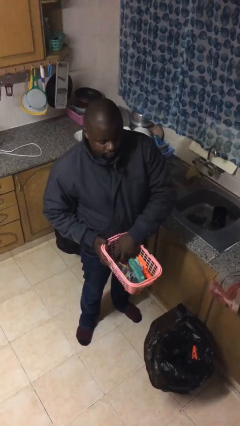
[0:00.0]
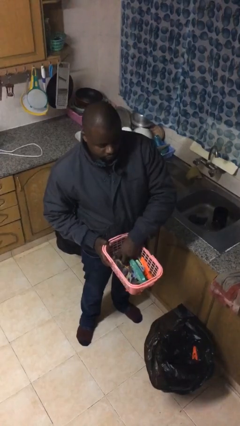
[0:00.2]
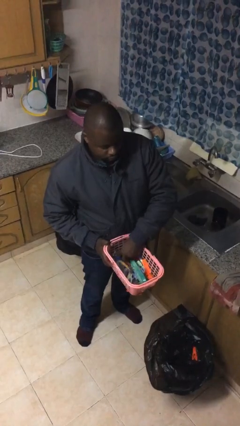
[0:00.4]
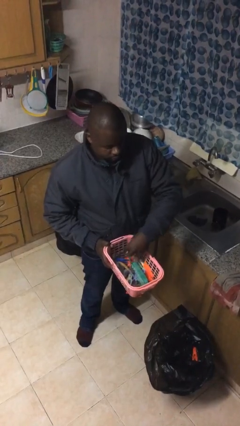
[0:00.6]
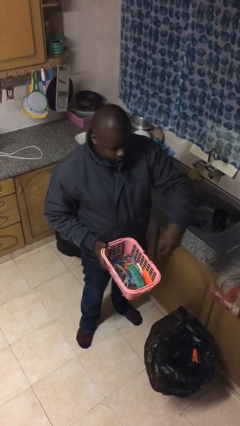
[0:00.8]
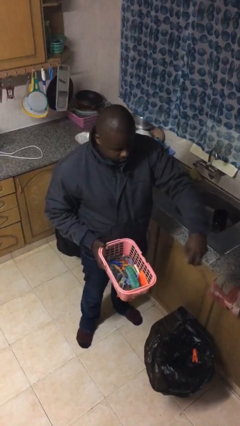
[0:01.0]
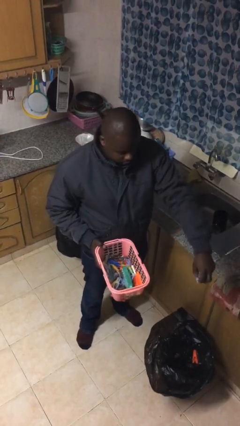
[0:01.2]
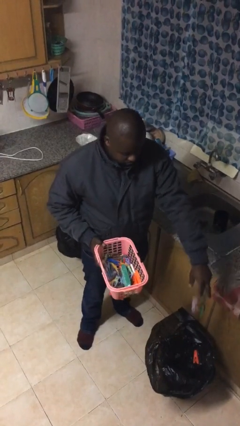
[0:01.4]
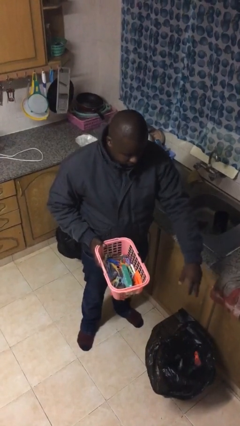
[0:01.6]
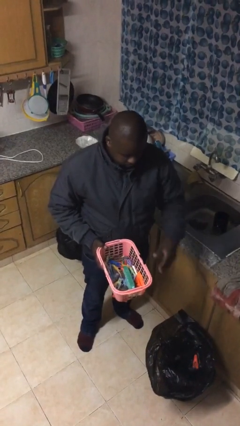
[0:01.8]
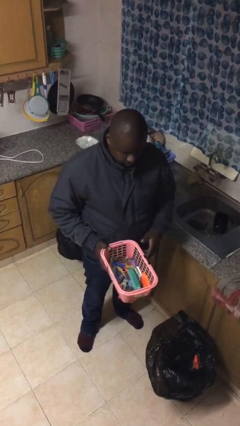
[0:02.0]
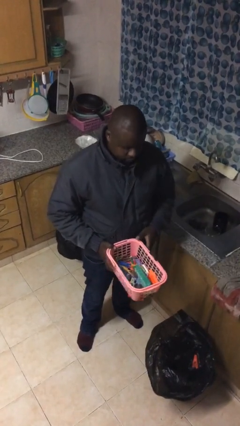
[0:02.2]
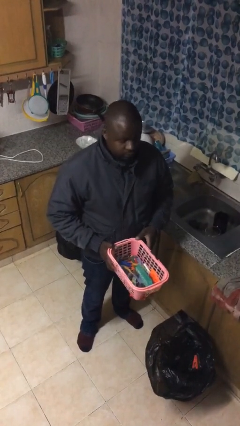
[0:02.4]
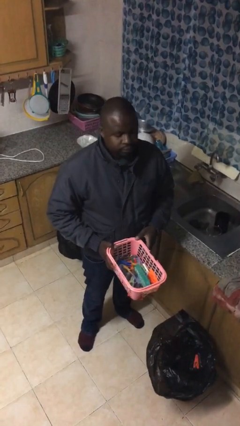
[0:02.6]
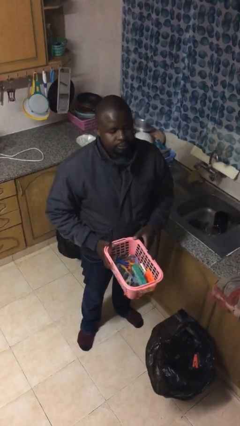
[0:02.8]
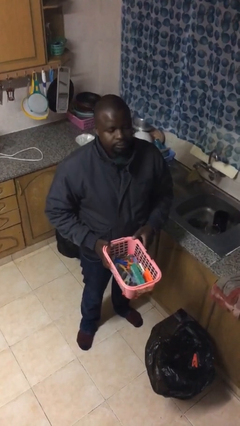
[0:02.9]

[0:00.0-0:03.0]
person discards trash

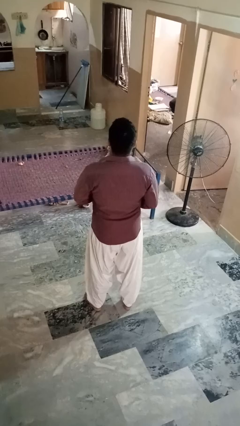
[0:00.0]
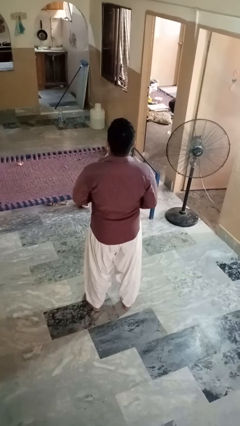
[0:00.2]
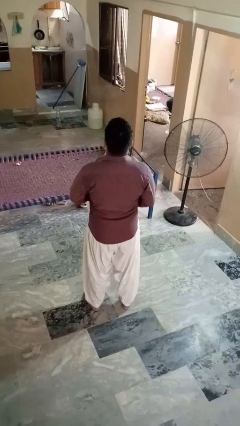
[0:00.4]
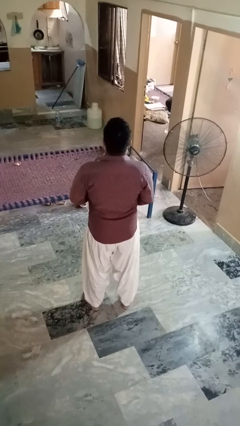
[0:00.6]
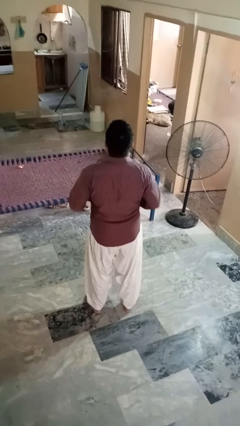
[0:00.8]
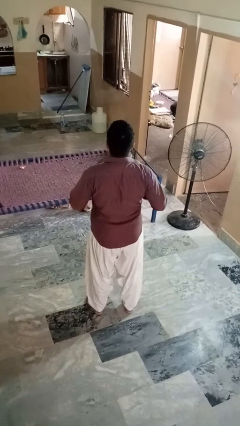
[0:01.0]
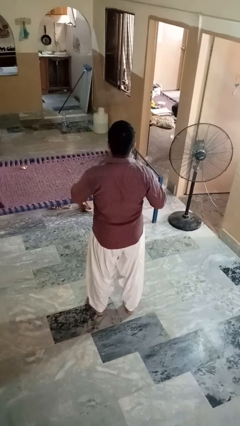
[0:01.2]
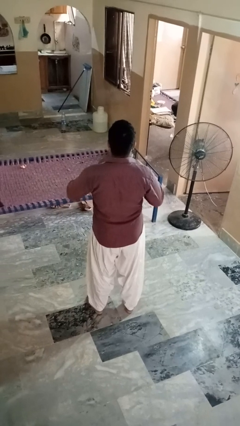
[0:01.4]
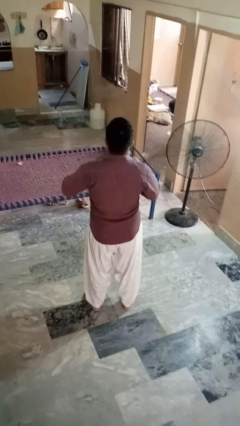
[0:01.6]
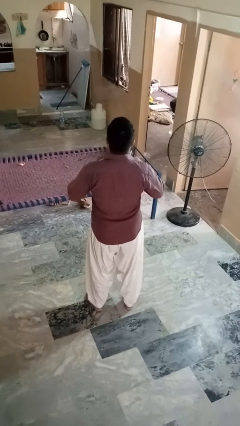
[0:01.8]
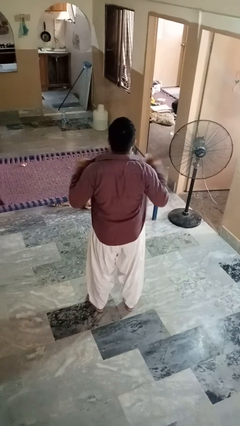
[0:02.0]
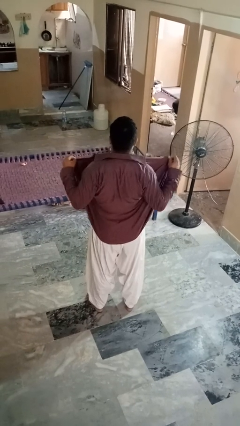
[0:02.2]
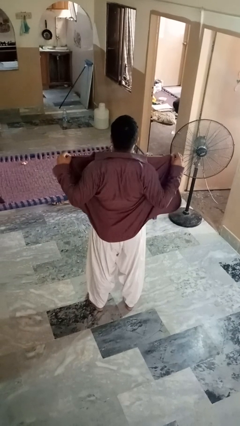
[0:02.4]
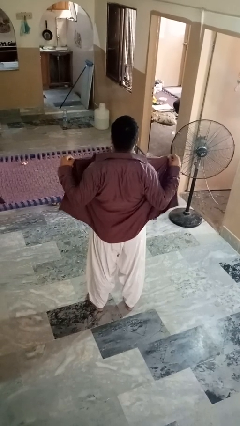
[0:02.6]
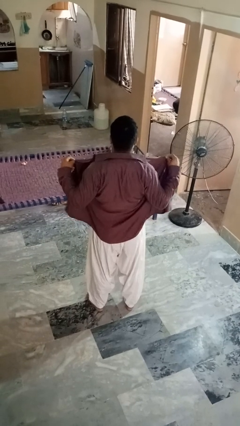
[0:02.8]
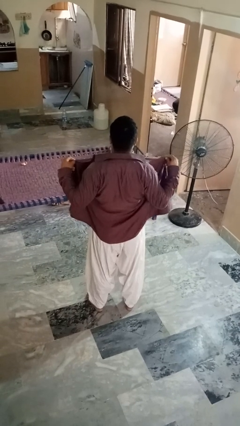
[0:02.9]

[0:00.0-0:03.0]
person unbuttons shirt

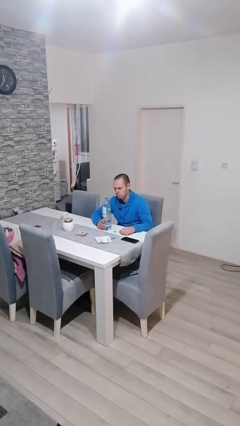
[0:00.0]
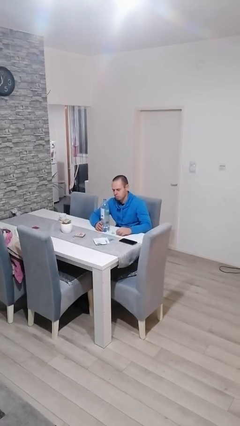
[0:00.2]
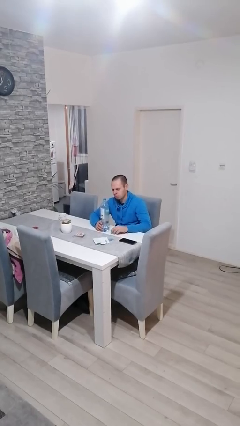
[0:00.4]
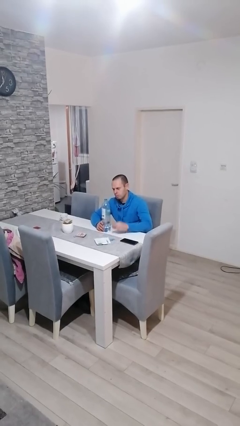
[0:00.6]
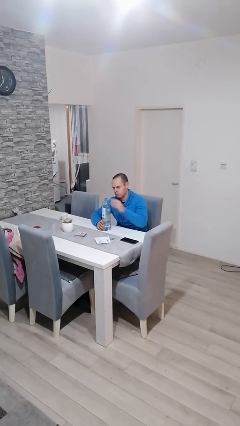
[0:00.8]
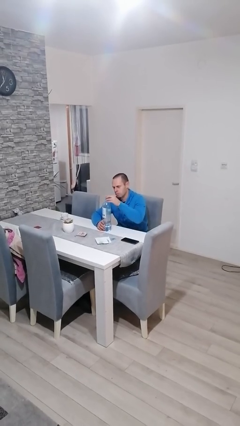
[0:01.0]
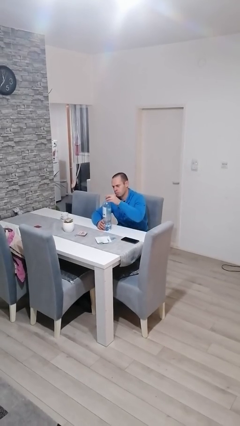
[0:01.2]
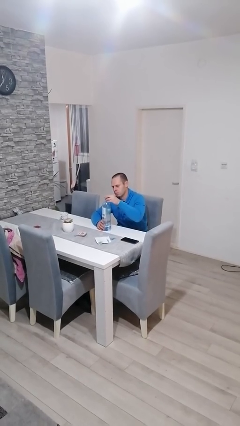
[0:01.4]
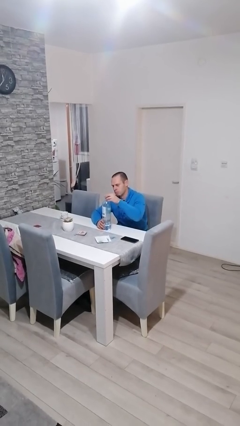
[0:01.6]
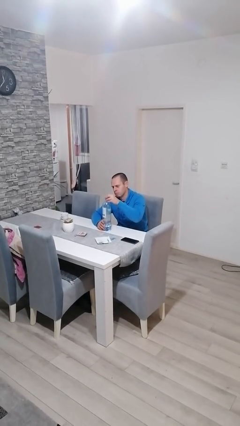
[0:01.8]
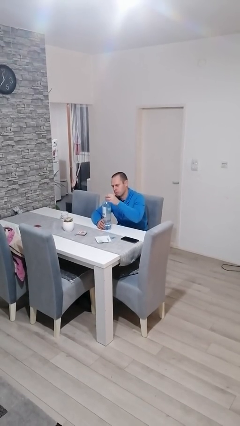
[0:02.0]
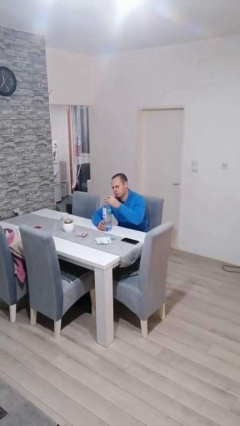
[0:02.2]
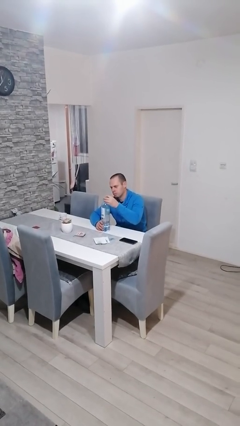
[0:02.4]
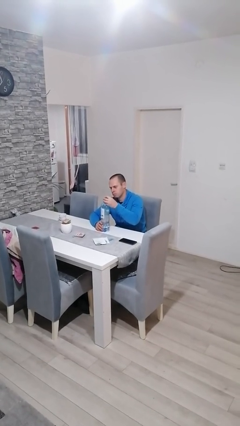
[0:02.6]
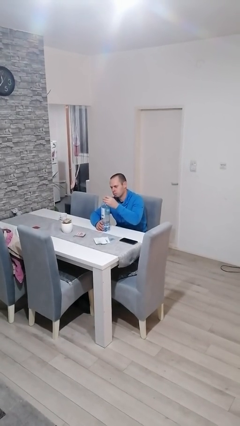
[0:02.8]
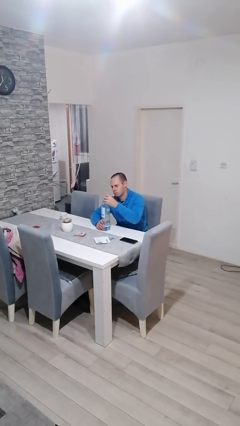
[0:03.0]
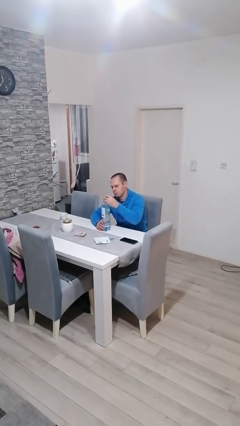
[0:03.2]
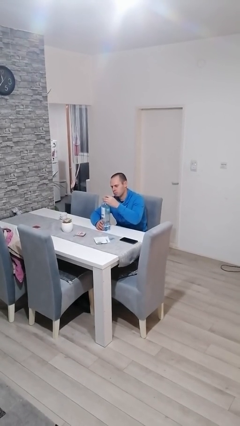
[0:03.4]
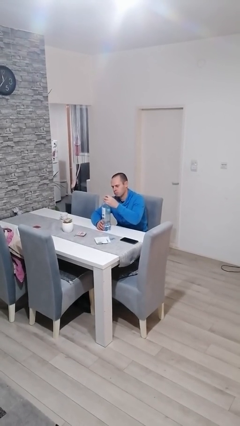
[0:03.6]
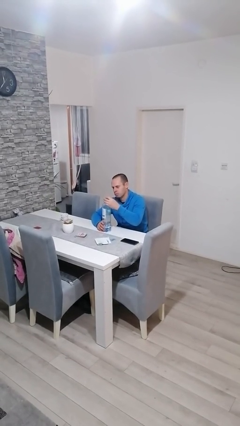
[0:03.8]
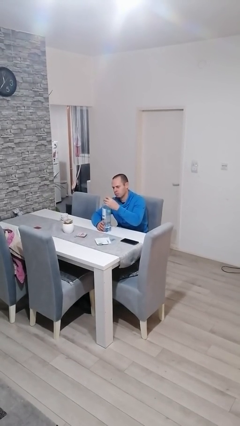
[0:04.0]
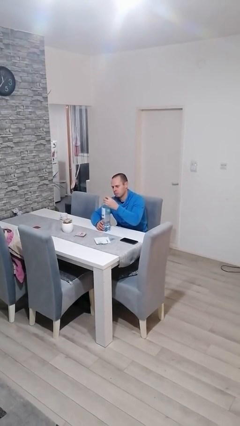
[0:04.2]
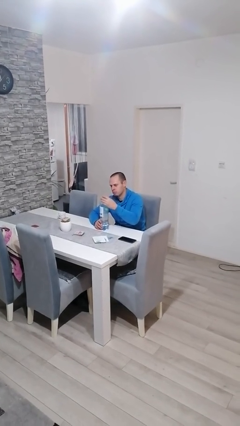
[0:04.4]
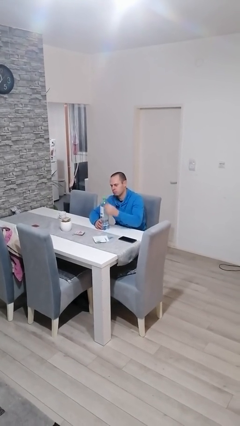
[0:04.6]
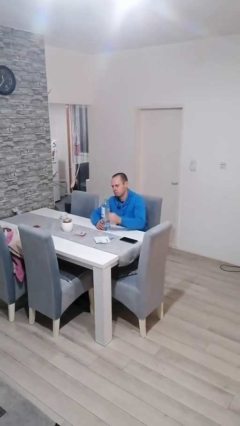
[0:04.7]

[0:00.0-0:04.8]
person screws lid to bottle

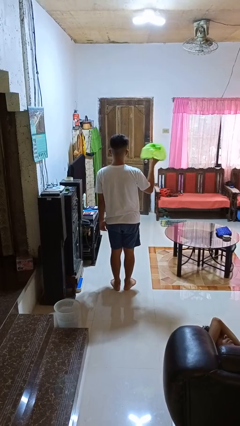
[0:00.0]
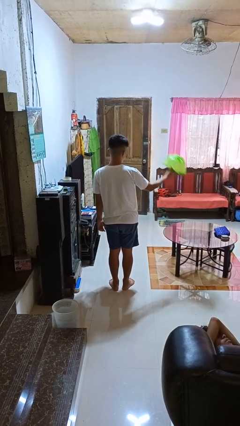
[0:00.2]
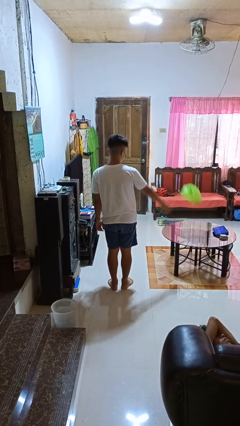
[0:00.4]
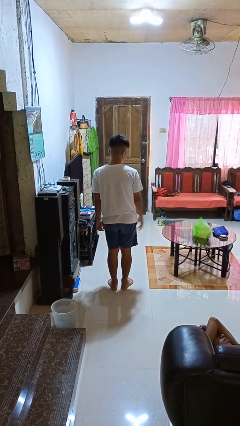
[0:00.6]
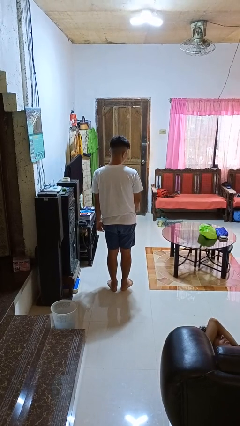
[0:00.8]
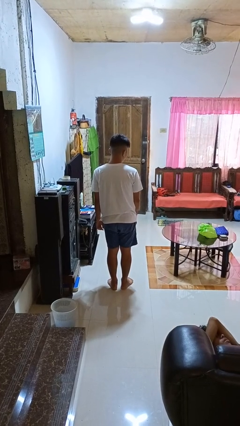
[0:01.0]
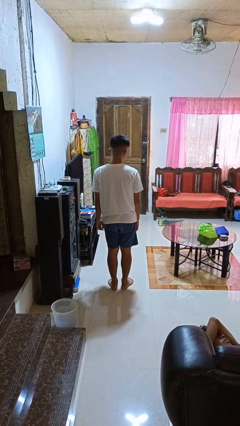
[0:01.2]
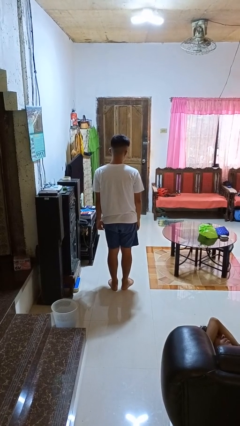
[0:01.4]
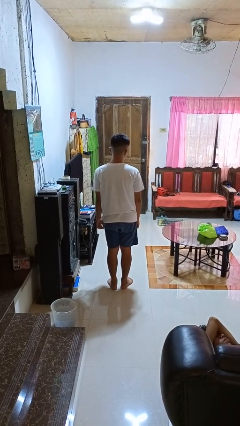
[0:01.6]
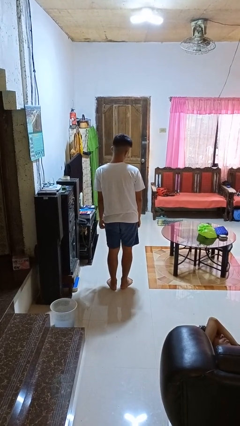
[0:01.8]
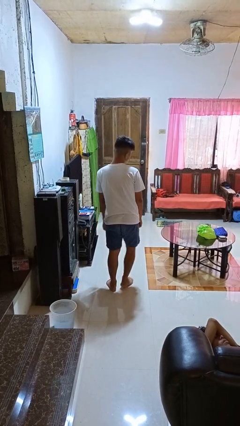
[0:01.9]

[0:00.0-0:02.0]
person throws object on table

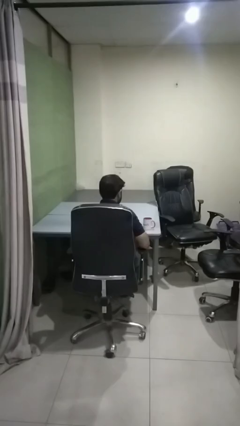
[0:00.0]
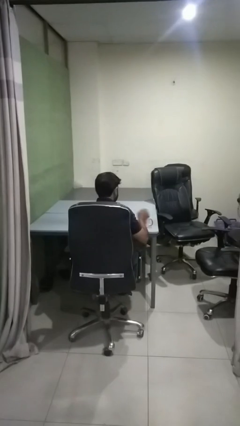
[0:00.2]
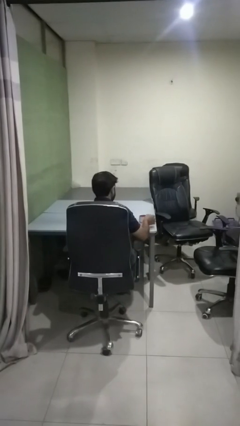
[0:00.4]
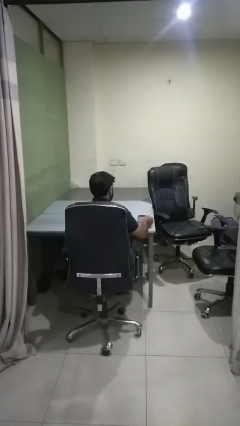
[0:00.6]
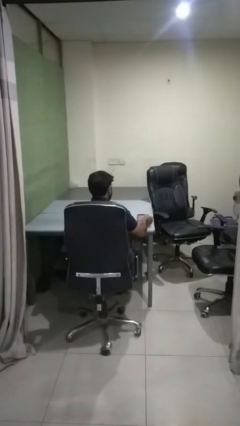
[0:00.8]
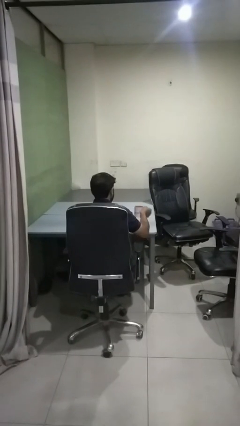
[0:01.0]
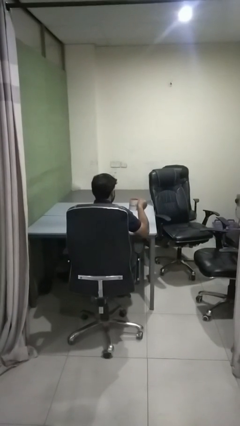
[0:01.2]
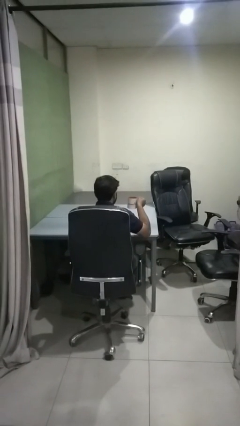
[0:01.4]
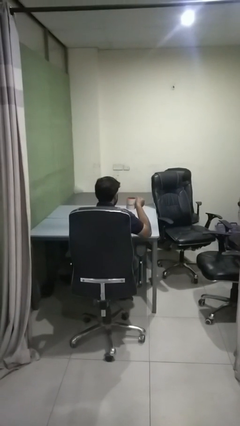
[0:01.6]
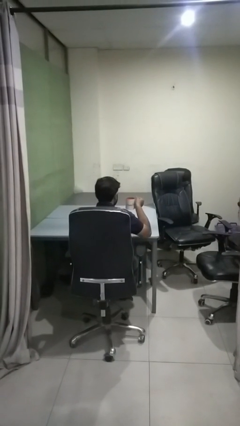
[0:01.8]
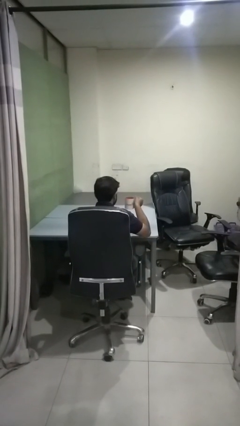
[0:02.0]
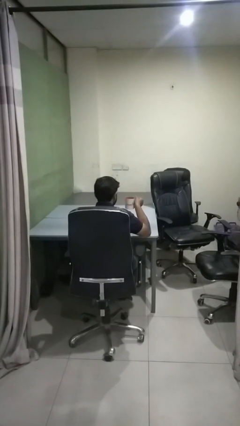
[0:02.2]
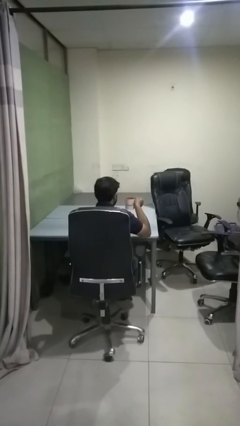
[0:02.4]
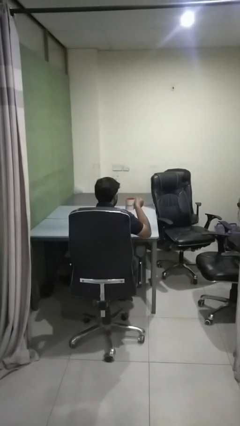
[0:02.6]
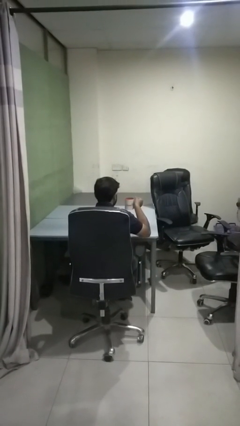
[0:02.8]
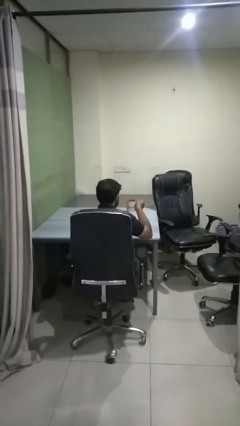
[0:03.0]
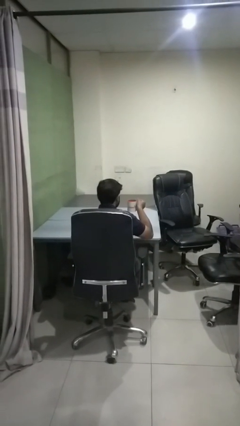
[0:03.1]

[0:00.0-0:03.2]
person picks up object from table

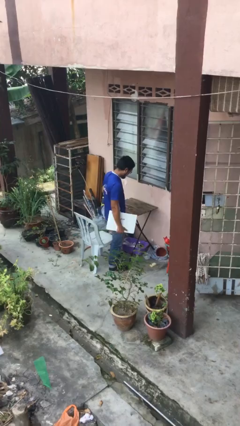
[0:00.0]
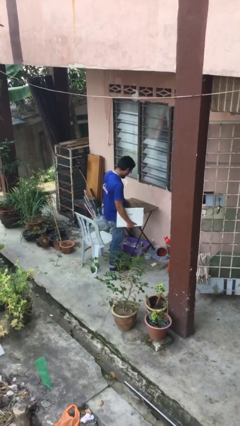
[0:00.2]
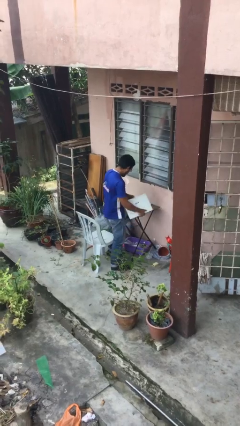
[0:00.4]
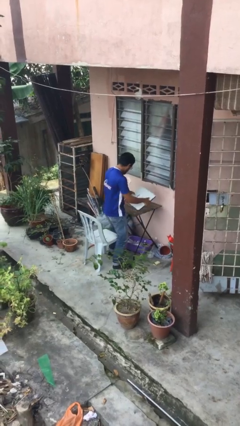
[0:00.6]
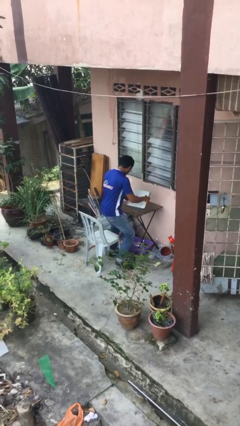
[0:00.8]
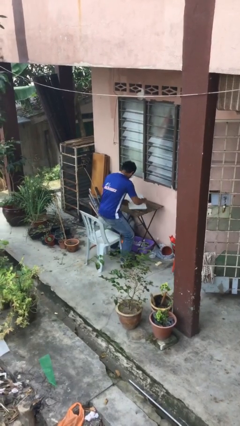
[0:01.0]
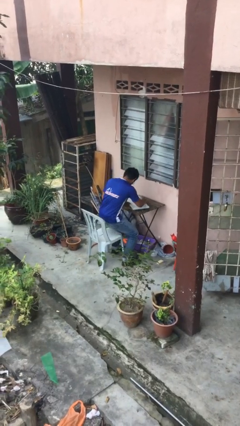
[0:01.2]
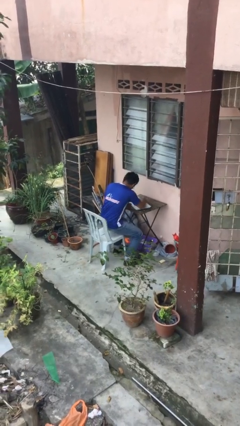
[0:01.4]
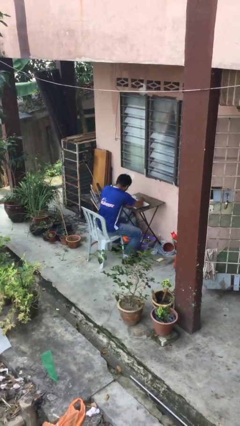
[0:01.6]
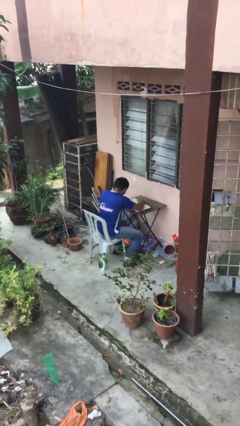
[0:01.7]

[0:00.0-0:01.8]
person sits down
